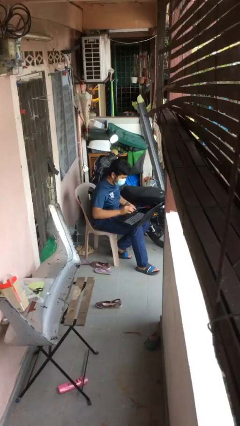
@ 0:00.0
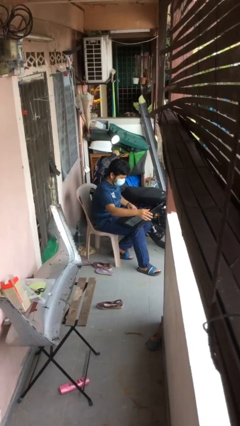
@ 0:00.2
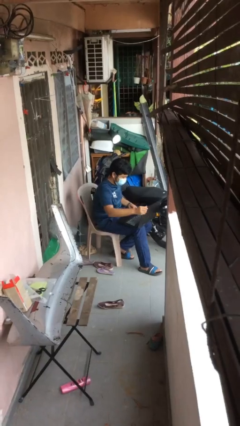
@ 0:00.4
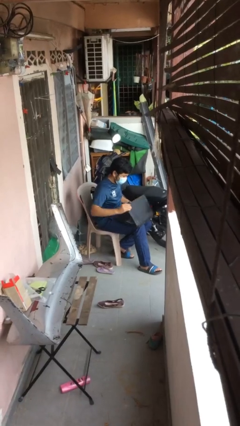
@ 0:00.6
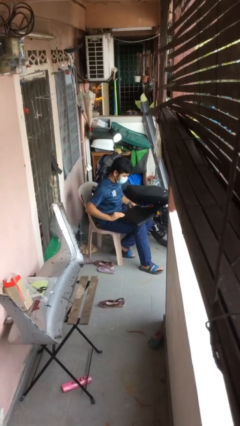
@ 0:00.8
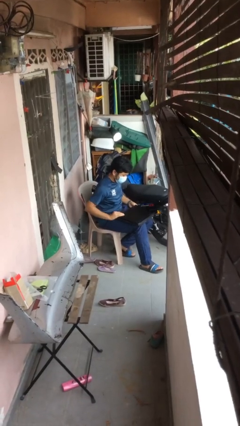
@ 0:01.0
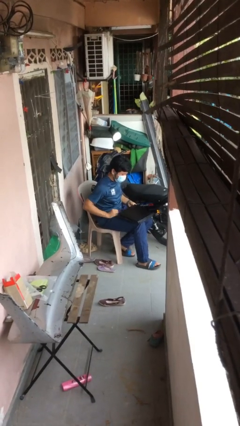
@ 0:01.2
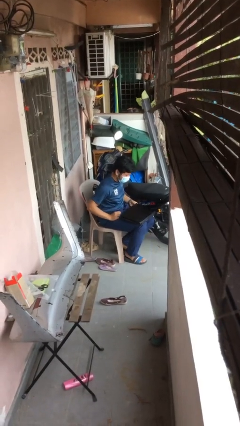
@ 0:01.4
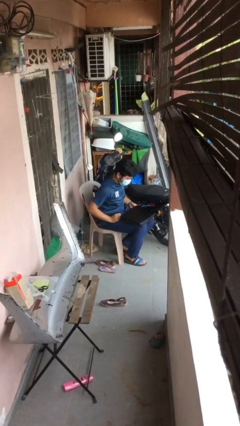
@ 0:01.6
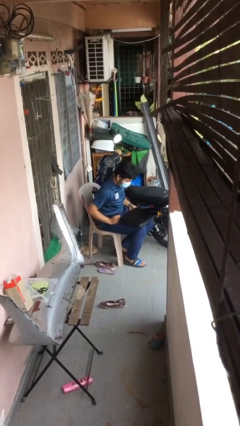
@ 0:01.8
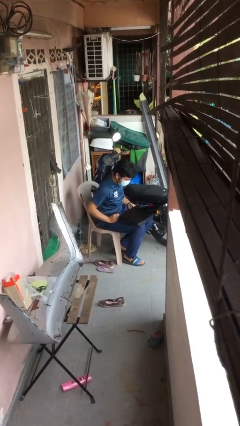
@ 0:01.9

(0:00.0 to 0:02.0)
person closes laptop

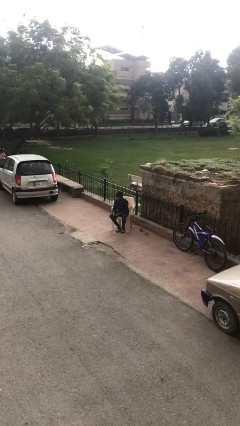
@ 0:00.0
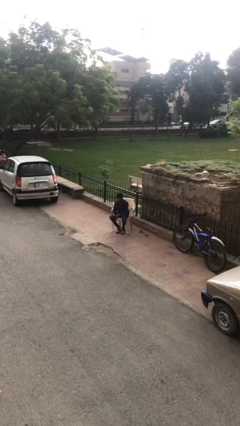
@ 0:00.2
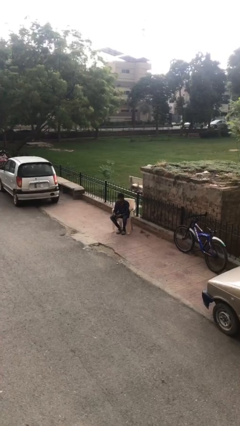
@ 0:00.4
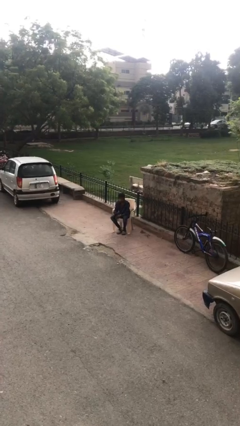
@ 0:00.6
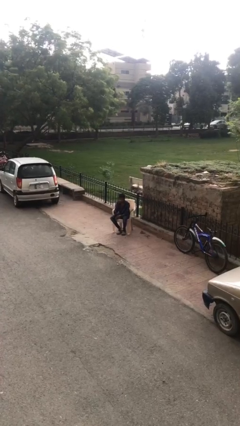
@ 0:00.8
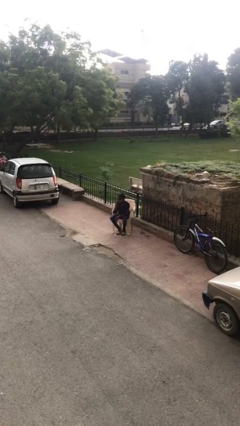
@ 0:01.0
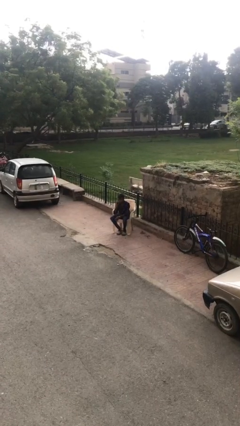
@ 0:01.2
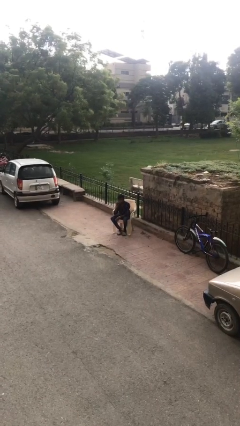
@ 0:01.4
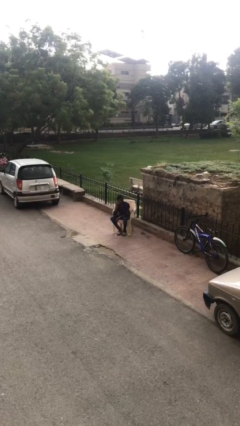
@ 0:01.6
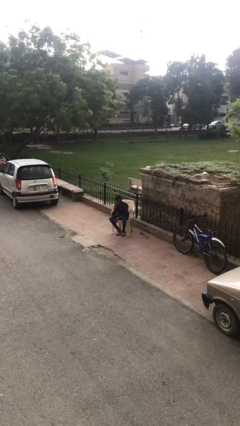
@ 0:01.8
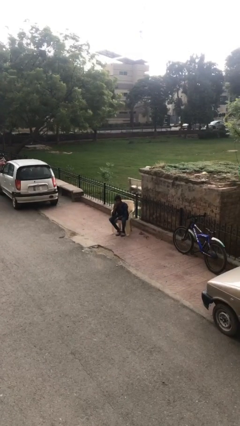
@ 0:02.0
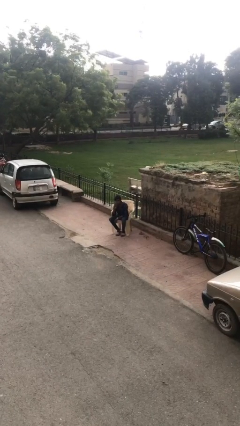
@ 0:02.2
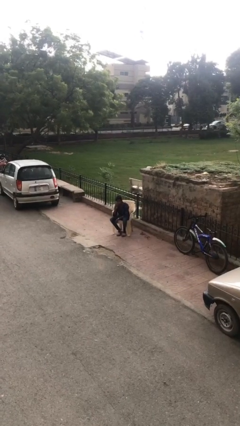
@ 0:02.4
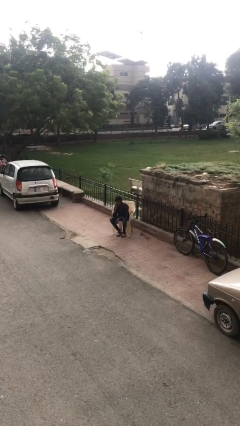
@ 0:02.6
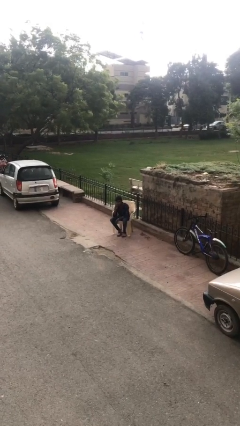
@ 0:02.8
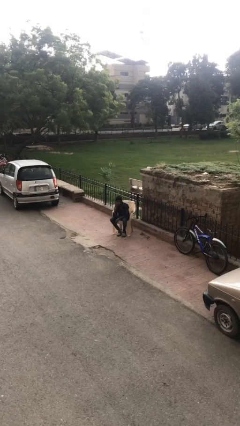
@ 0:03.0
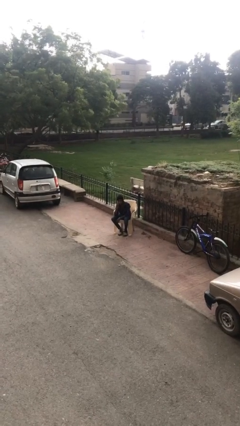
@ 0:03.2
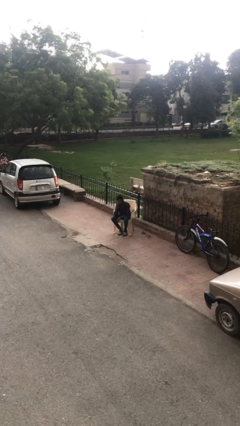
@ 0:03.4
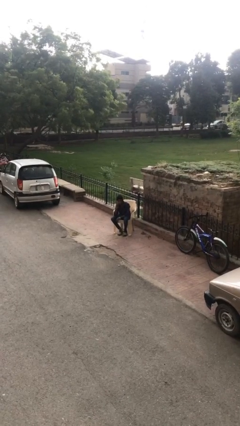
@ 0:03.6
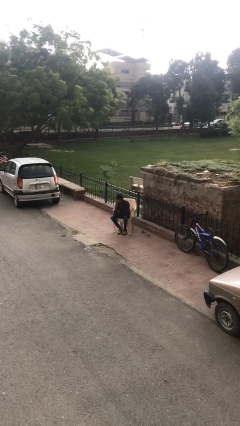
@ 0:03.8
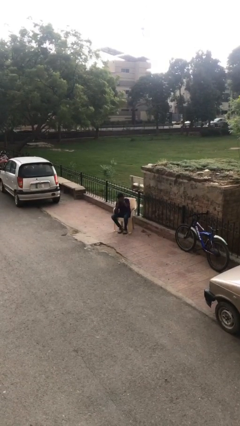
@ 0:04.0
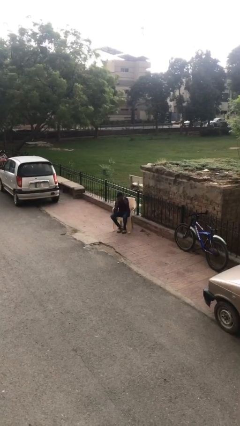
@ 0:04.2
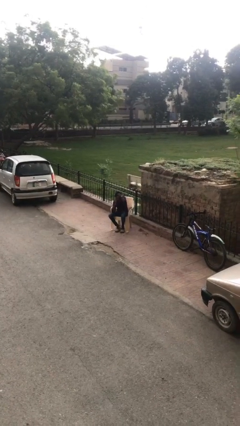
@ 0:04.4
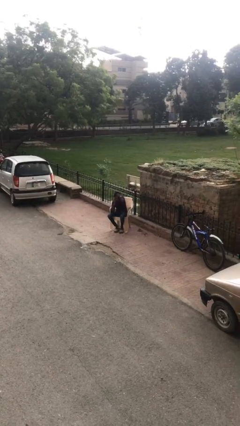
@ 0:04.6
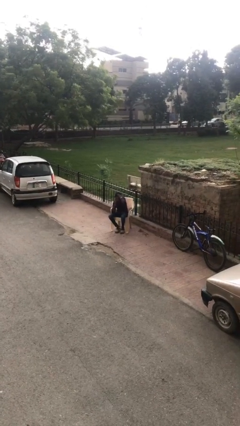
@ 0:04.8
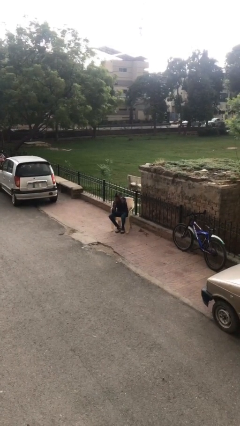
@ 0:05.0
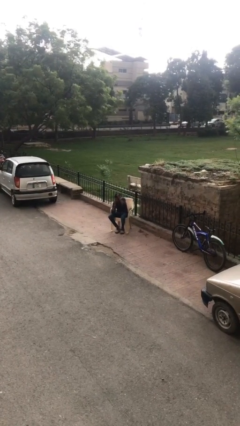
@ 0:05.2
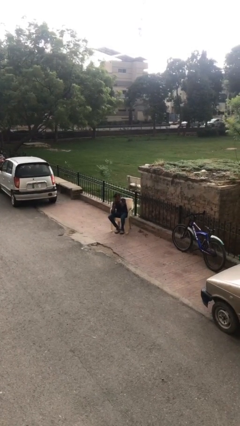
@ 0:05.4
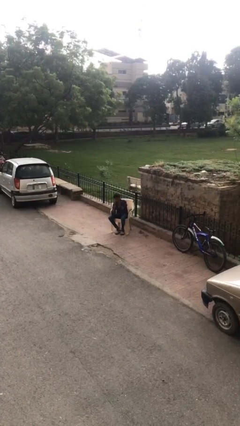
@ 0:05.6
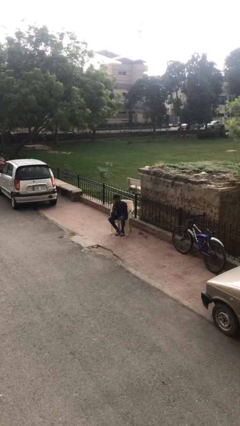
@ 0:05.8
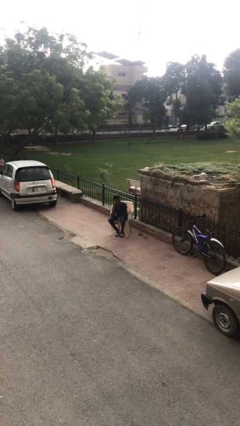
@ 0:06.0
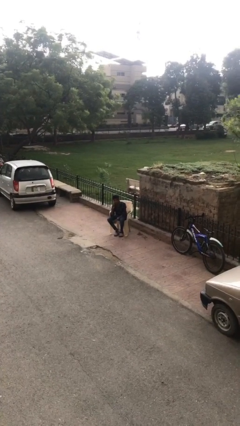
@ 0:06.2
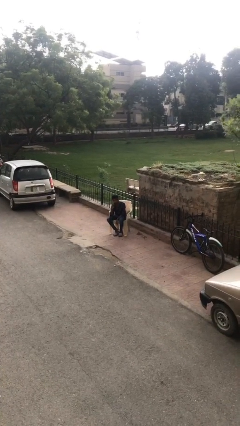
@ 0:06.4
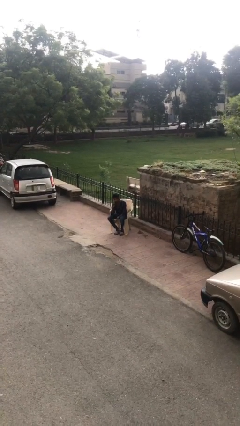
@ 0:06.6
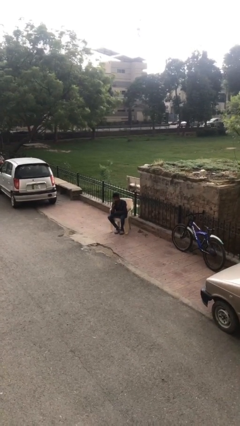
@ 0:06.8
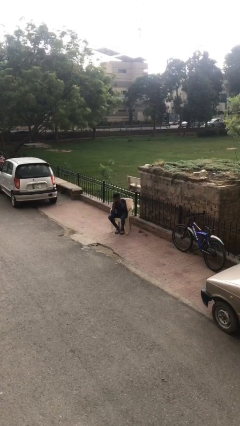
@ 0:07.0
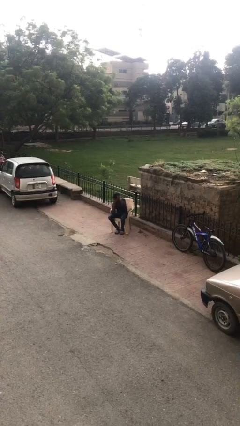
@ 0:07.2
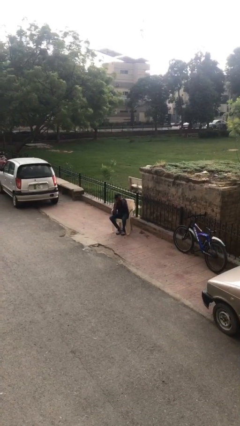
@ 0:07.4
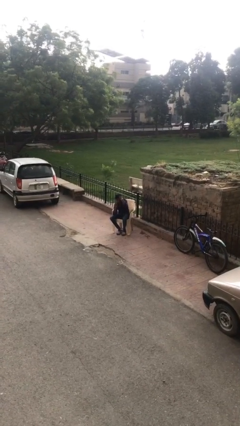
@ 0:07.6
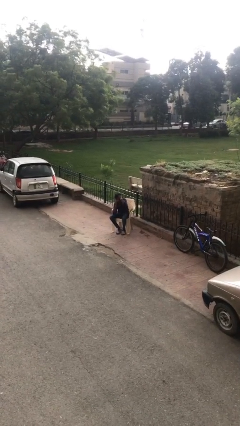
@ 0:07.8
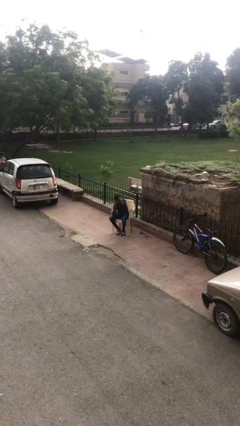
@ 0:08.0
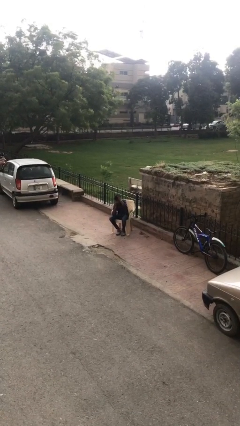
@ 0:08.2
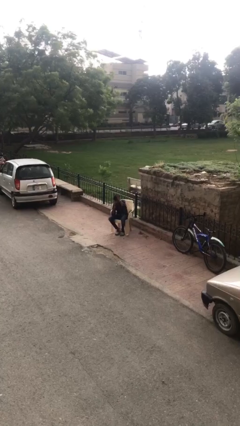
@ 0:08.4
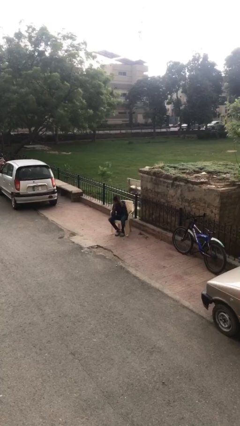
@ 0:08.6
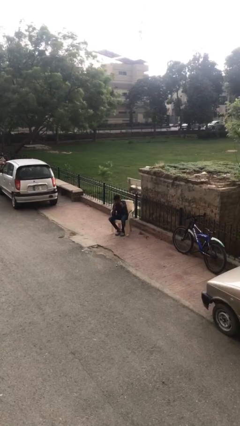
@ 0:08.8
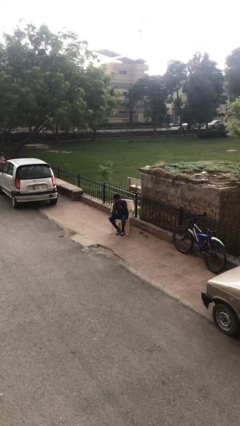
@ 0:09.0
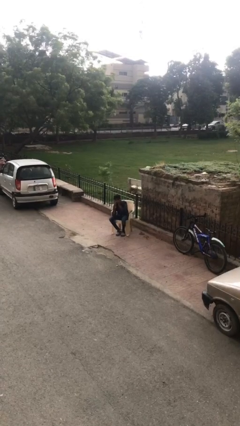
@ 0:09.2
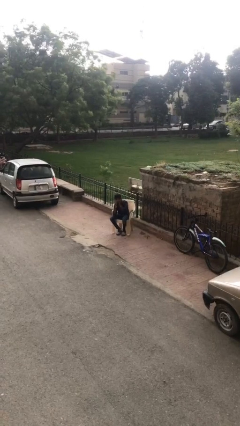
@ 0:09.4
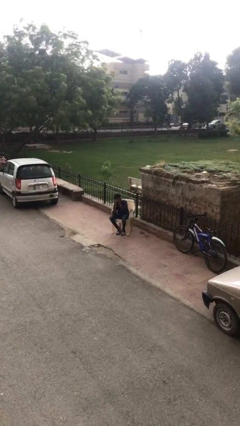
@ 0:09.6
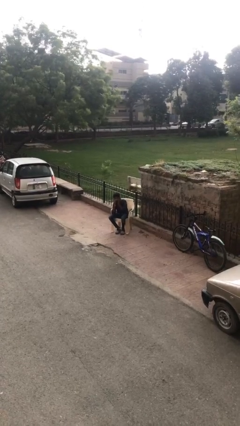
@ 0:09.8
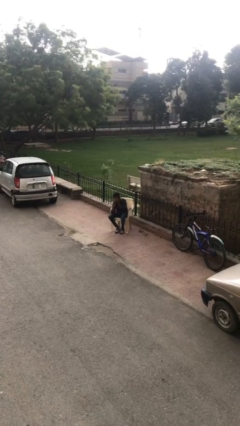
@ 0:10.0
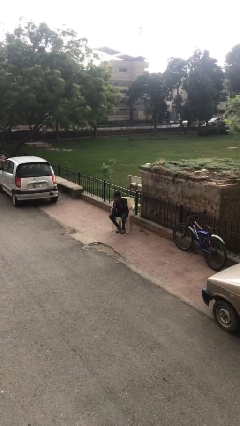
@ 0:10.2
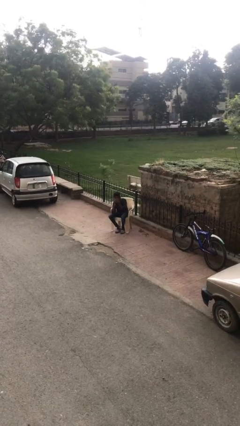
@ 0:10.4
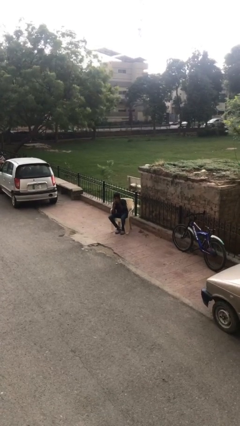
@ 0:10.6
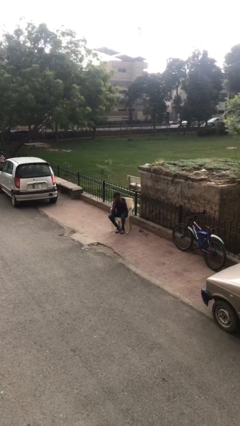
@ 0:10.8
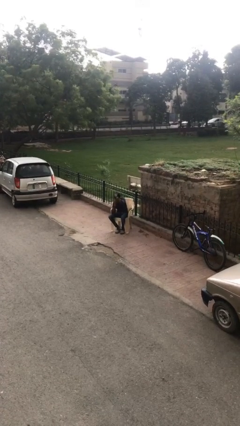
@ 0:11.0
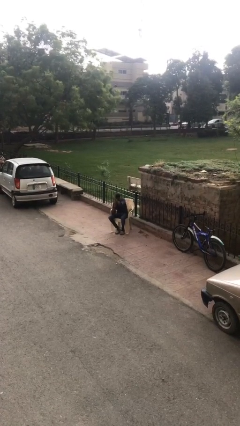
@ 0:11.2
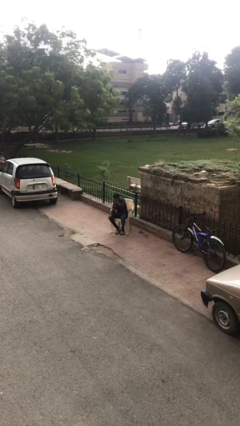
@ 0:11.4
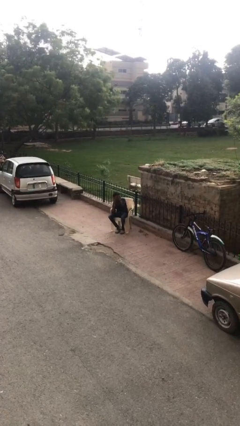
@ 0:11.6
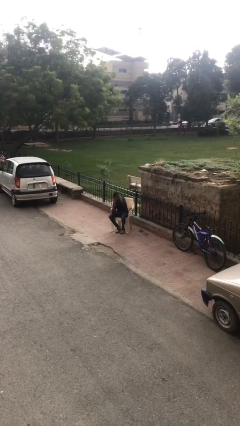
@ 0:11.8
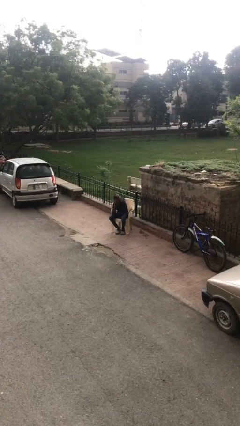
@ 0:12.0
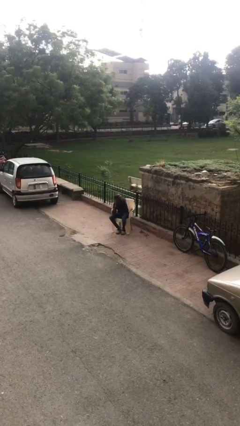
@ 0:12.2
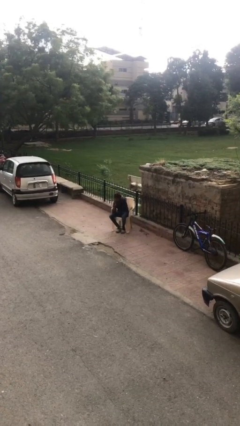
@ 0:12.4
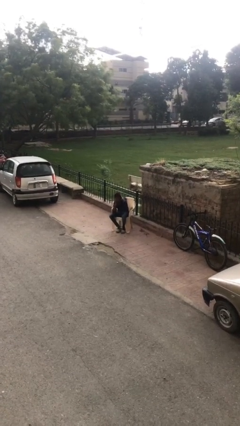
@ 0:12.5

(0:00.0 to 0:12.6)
person talks on phone

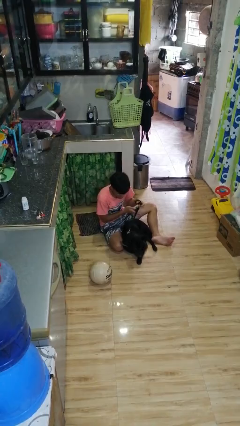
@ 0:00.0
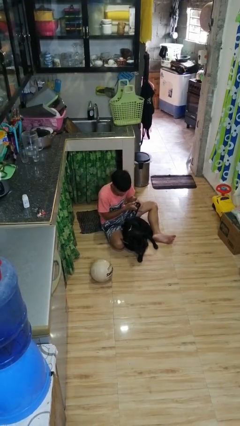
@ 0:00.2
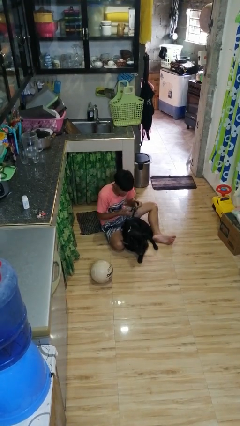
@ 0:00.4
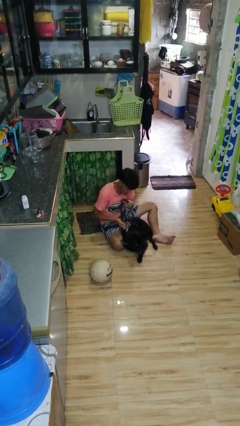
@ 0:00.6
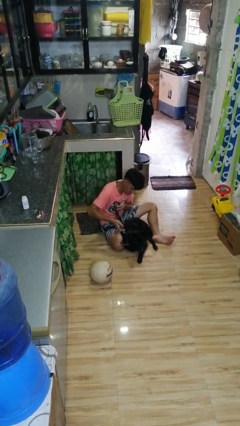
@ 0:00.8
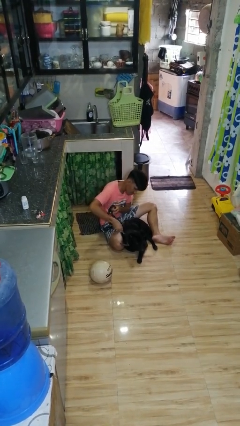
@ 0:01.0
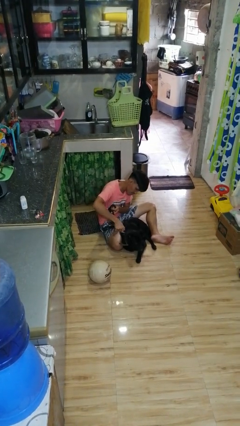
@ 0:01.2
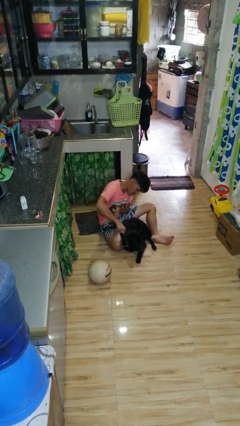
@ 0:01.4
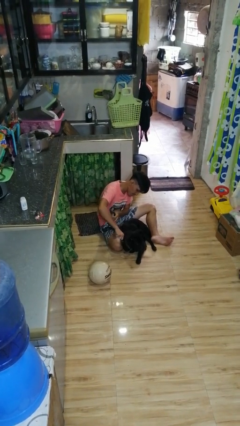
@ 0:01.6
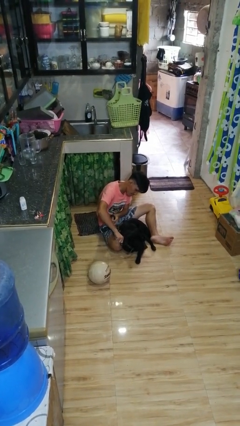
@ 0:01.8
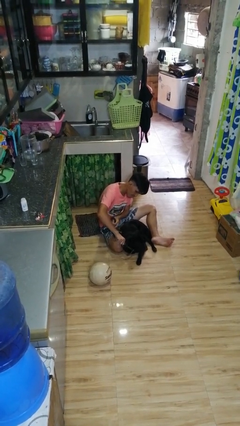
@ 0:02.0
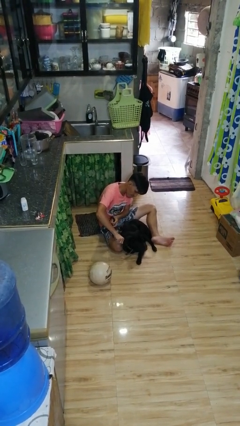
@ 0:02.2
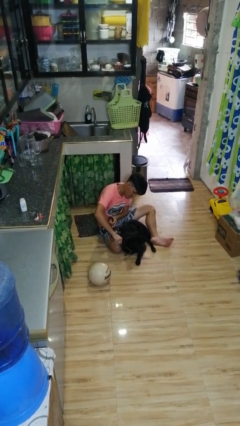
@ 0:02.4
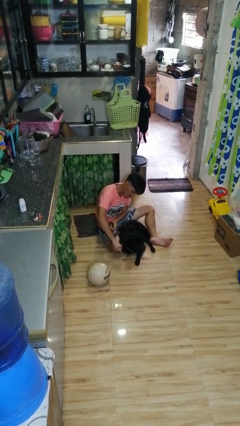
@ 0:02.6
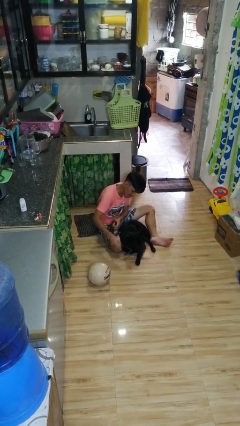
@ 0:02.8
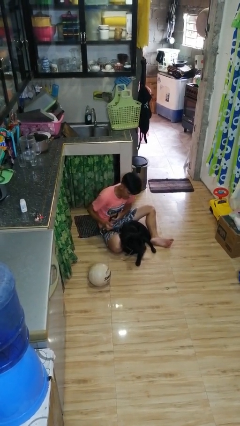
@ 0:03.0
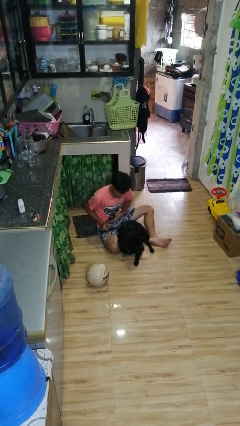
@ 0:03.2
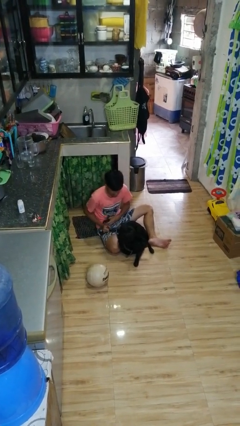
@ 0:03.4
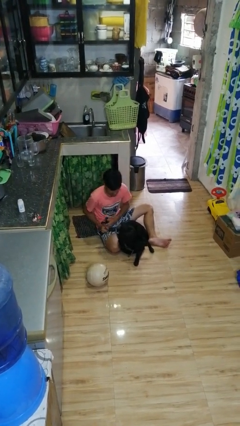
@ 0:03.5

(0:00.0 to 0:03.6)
person unattaches leash from dog
